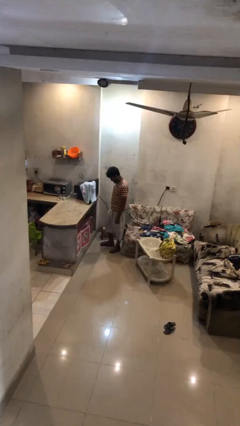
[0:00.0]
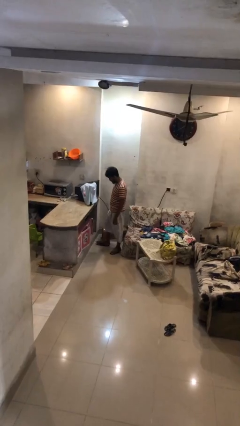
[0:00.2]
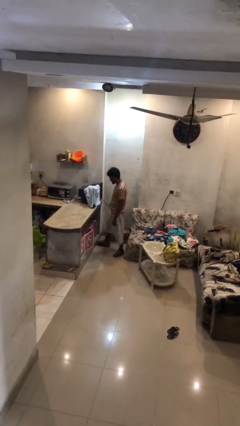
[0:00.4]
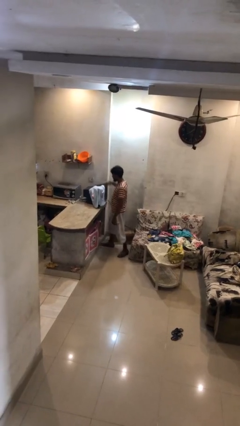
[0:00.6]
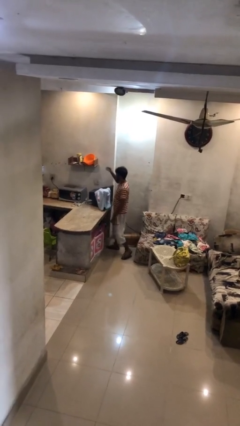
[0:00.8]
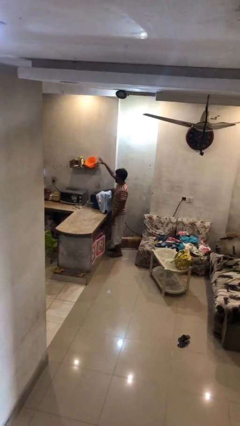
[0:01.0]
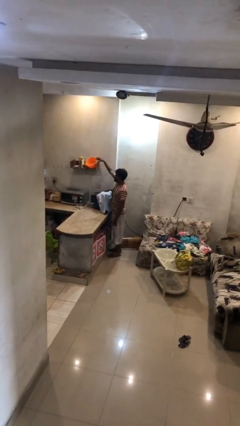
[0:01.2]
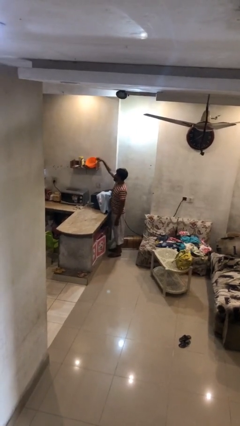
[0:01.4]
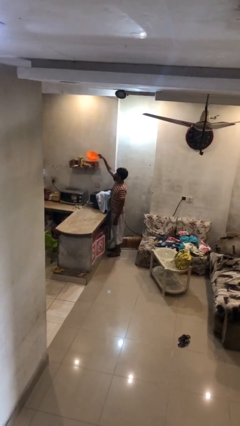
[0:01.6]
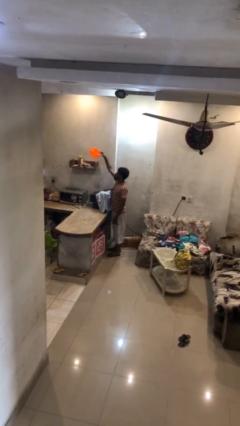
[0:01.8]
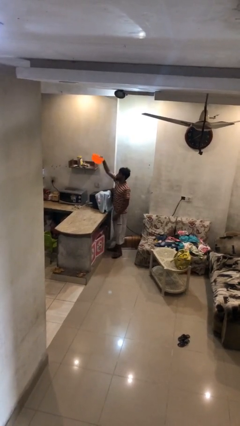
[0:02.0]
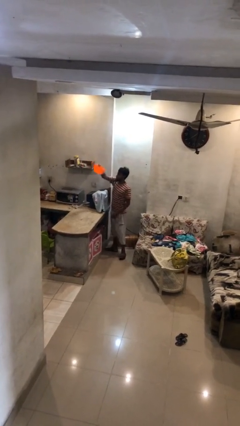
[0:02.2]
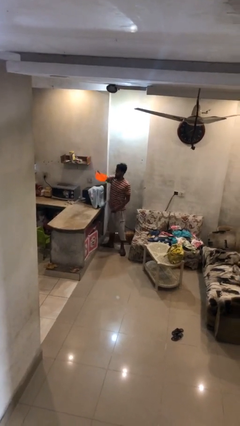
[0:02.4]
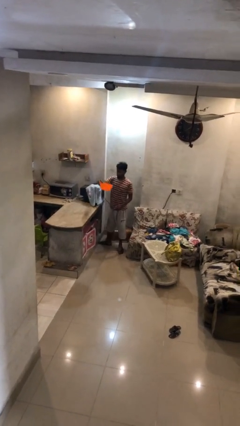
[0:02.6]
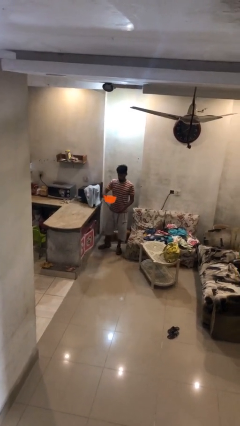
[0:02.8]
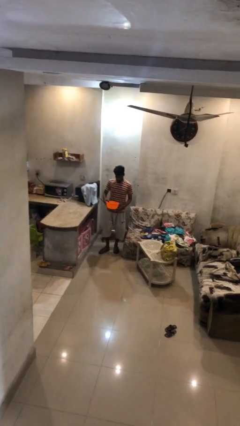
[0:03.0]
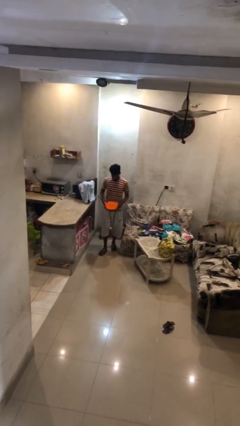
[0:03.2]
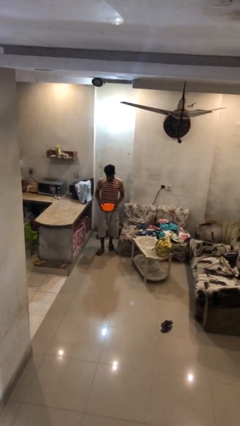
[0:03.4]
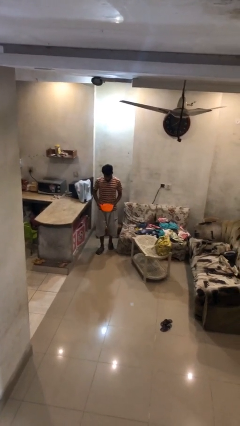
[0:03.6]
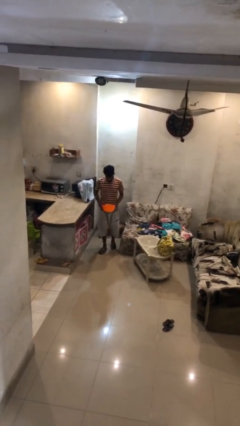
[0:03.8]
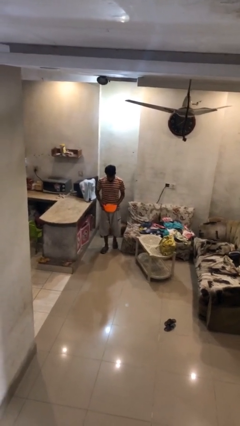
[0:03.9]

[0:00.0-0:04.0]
person picks up object from shelf

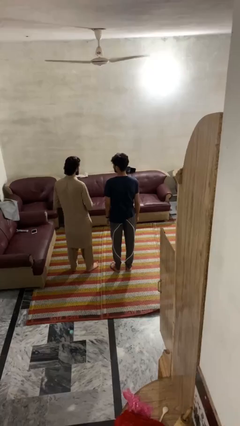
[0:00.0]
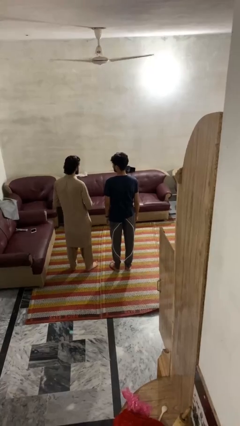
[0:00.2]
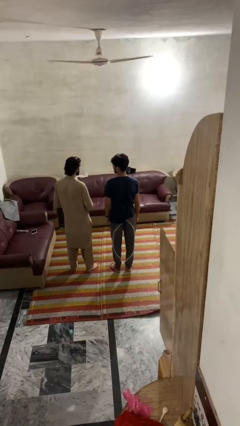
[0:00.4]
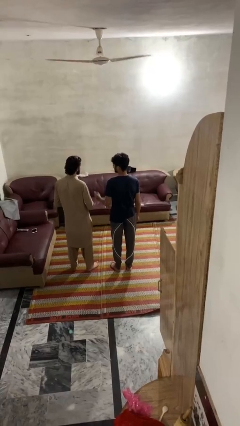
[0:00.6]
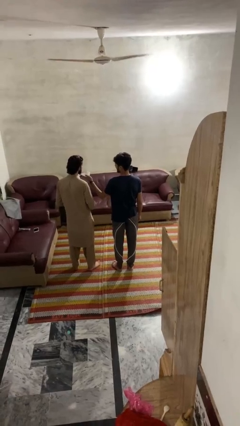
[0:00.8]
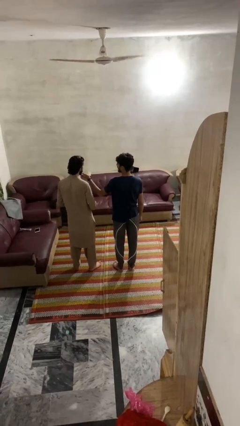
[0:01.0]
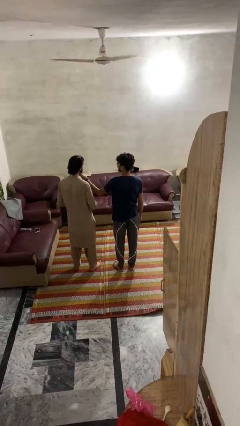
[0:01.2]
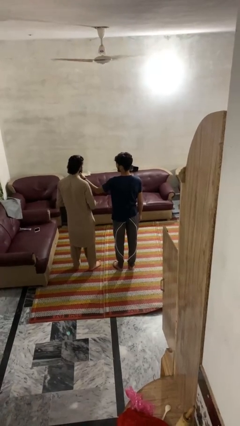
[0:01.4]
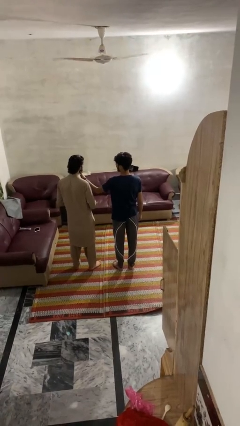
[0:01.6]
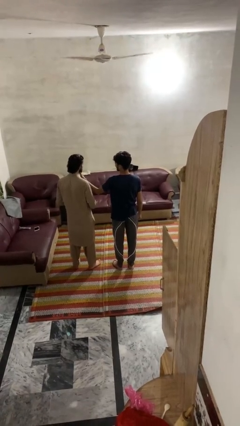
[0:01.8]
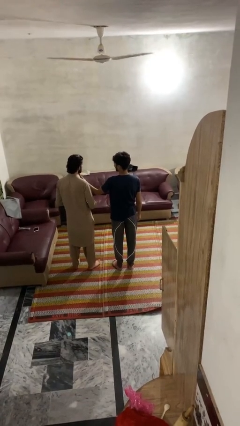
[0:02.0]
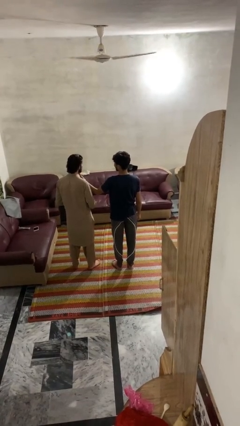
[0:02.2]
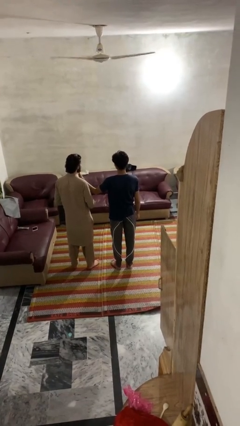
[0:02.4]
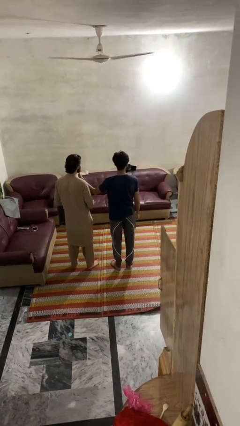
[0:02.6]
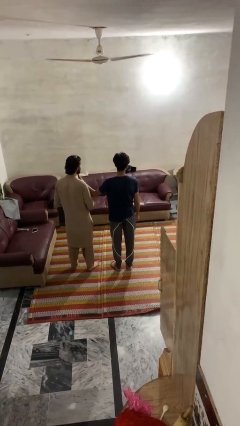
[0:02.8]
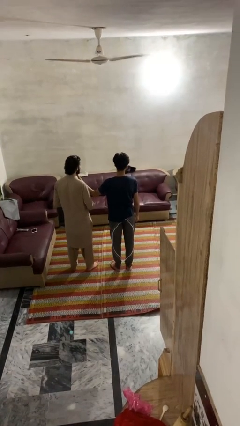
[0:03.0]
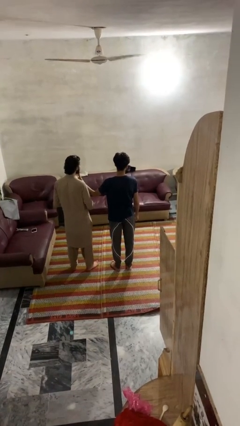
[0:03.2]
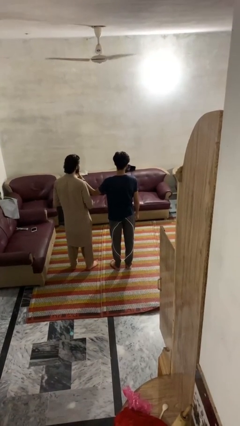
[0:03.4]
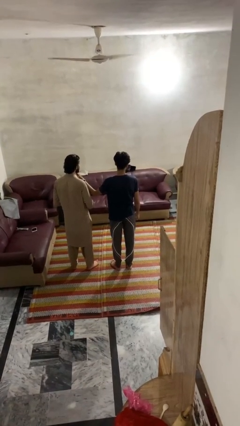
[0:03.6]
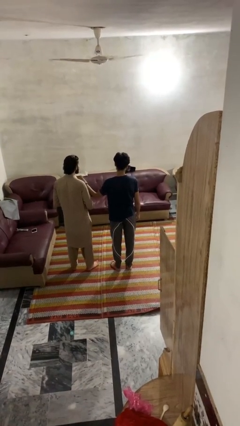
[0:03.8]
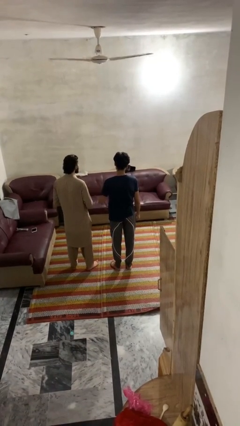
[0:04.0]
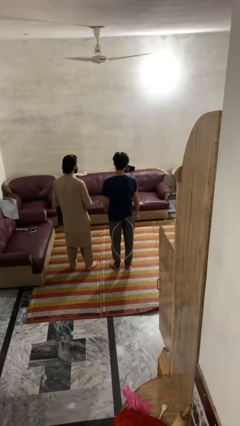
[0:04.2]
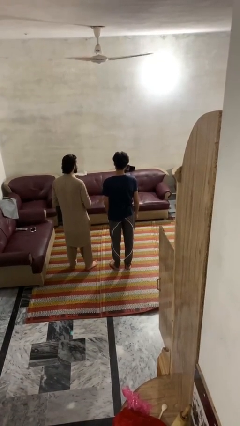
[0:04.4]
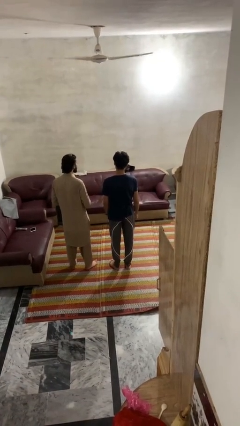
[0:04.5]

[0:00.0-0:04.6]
person touches face of person

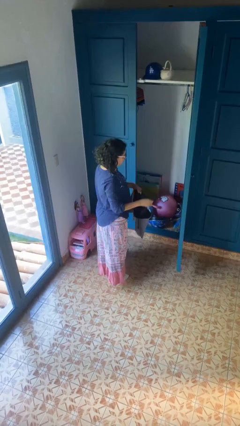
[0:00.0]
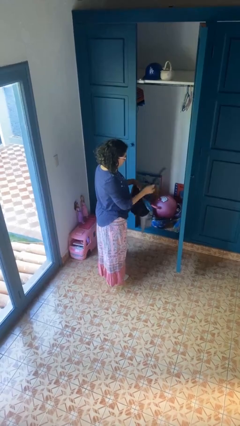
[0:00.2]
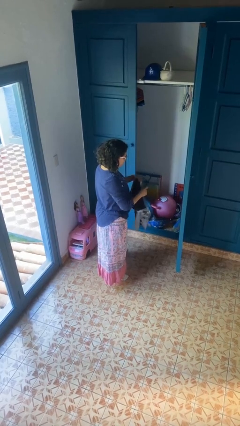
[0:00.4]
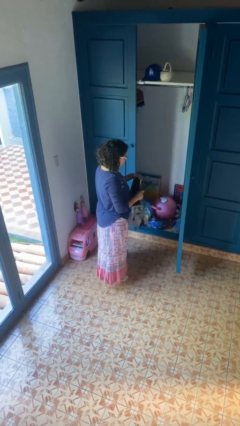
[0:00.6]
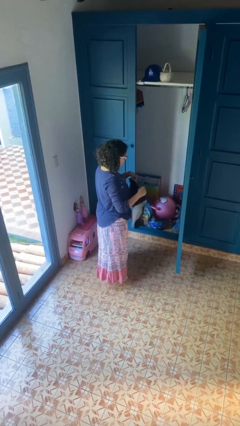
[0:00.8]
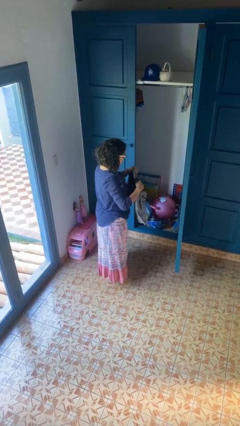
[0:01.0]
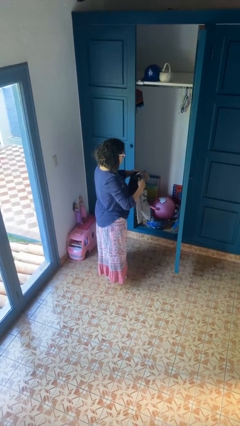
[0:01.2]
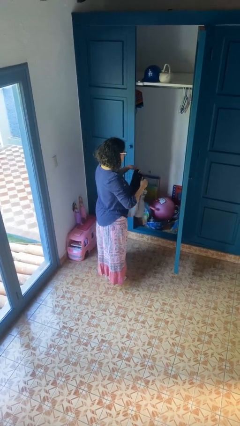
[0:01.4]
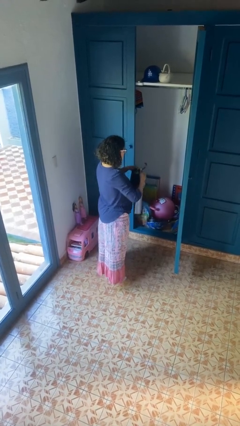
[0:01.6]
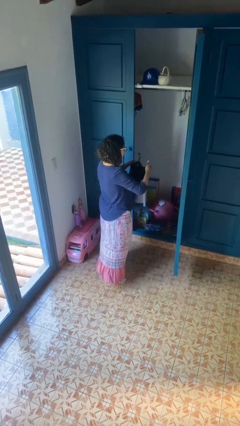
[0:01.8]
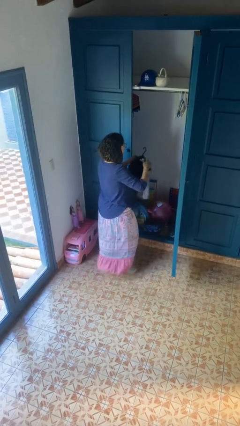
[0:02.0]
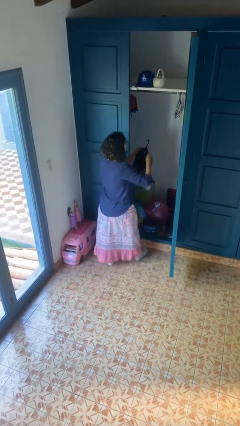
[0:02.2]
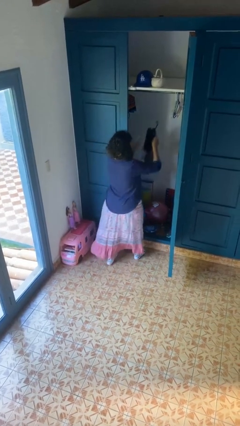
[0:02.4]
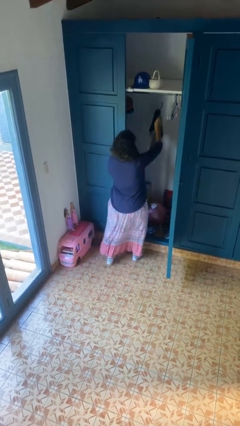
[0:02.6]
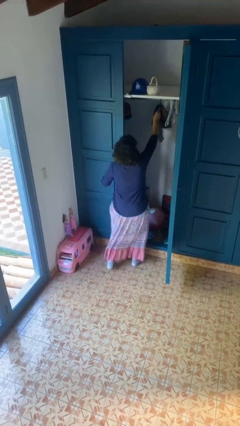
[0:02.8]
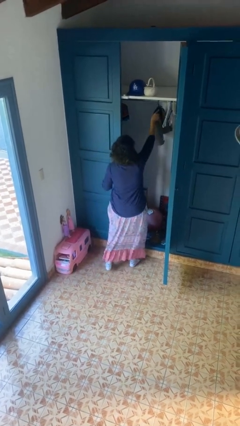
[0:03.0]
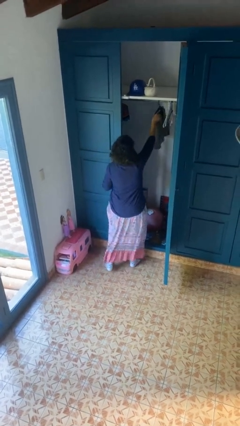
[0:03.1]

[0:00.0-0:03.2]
person puts clothes into closet

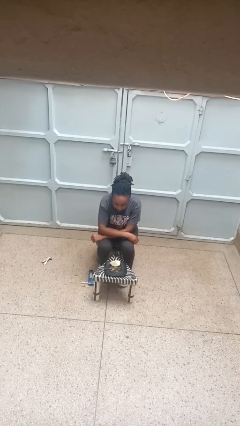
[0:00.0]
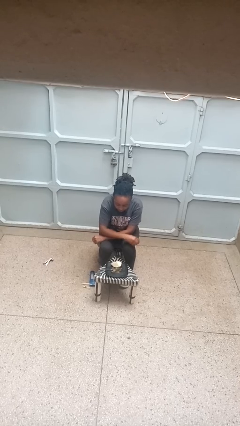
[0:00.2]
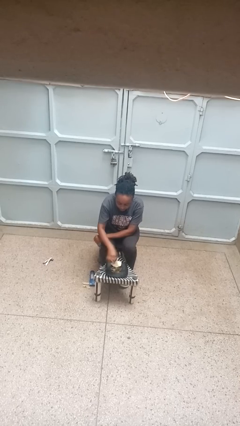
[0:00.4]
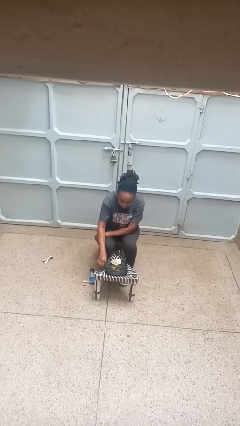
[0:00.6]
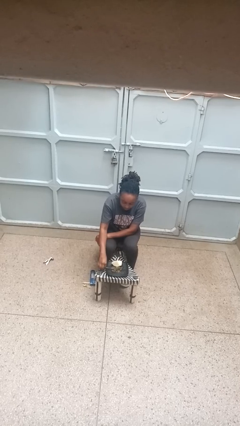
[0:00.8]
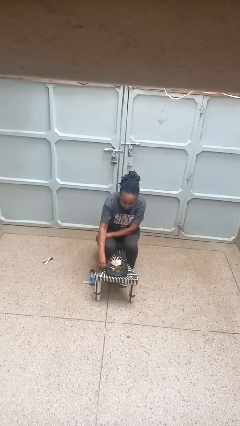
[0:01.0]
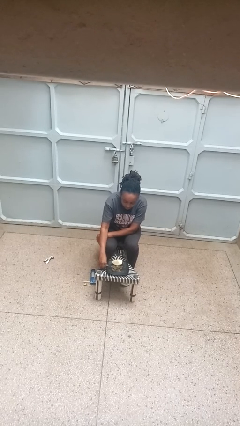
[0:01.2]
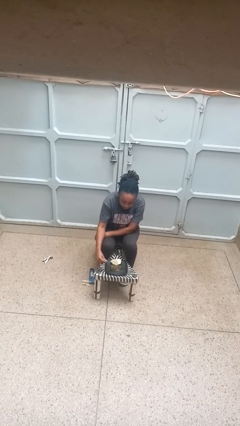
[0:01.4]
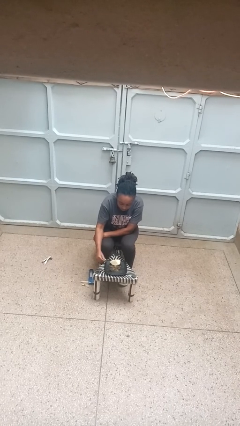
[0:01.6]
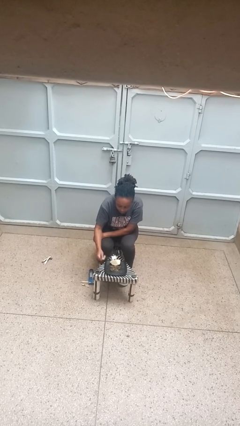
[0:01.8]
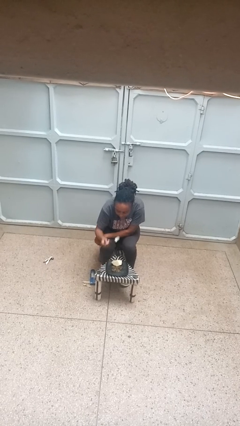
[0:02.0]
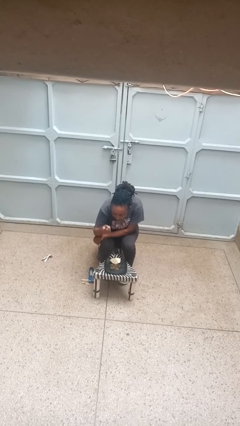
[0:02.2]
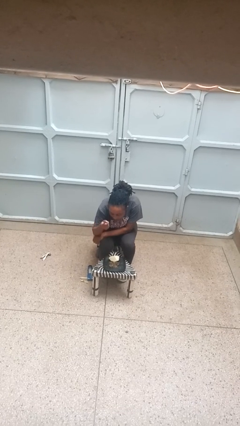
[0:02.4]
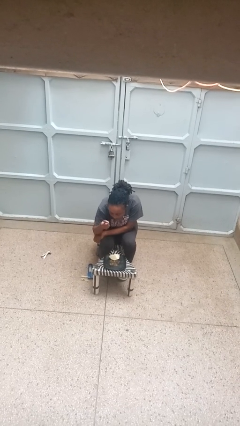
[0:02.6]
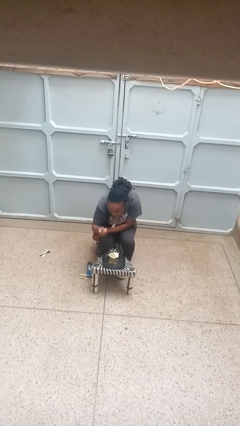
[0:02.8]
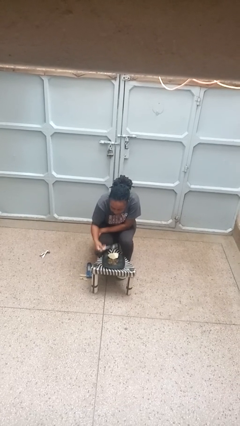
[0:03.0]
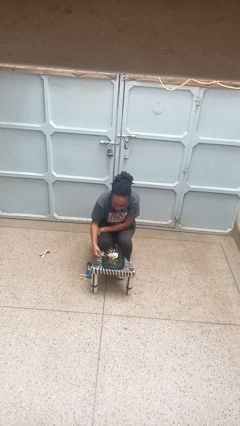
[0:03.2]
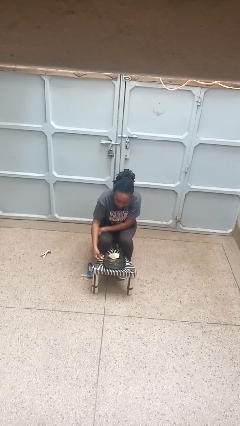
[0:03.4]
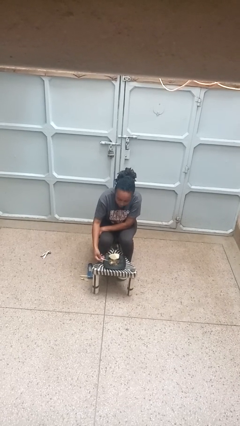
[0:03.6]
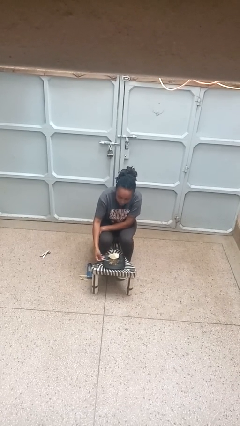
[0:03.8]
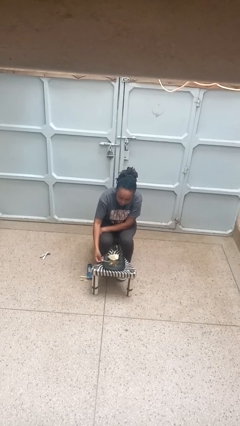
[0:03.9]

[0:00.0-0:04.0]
person eats with utensil

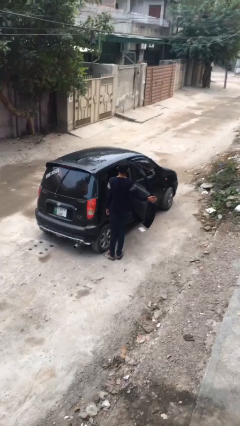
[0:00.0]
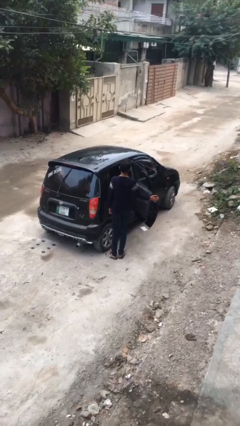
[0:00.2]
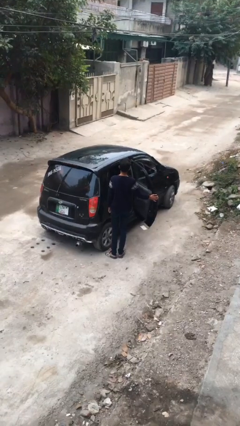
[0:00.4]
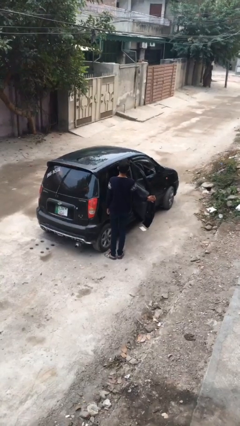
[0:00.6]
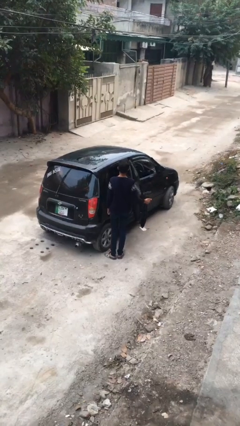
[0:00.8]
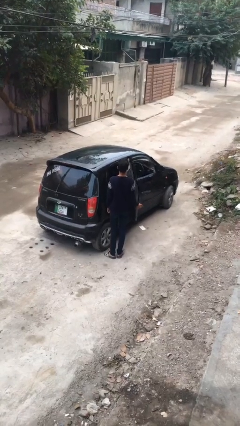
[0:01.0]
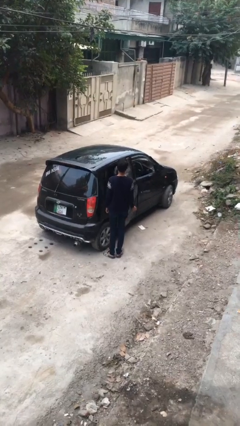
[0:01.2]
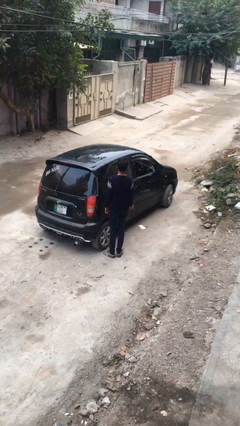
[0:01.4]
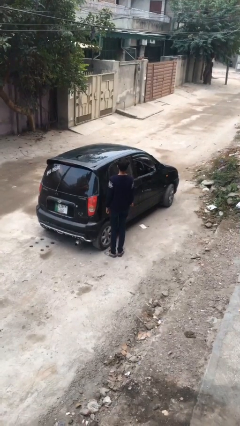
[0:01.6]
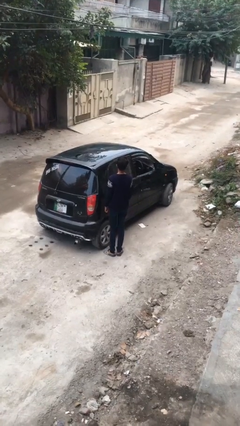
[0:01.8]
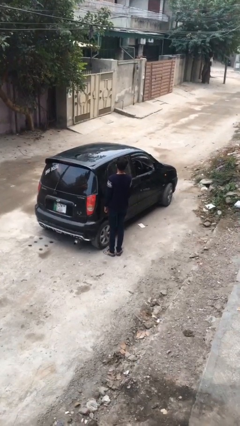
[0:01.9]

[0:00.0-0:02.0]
person closes car door
